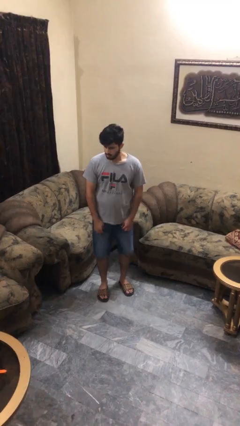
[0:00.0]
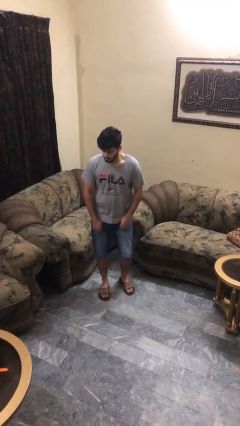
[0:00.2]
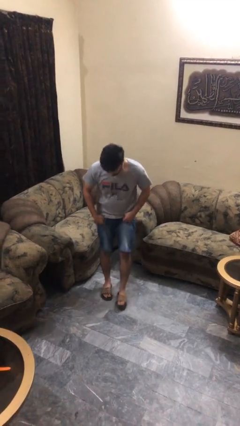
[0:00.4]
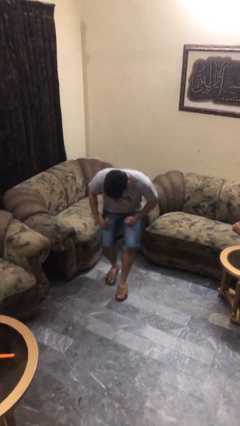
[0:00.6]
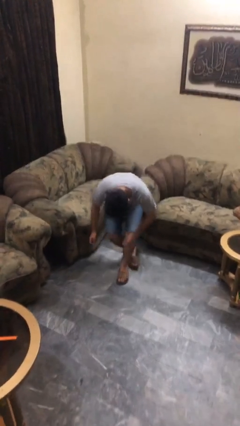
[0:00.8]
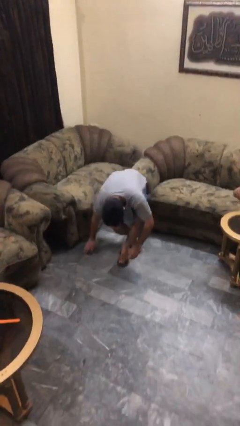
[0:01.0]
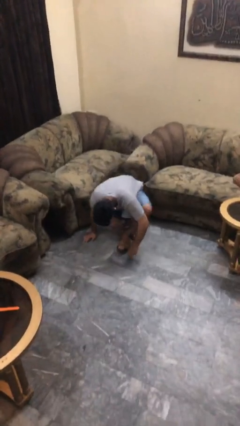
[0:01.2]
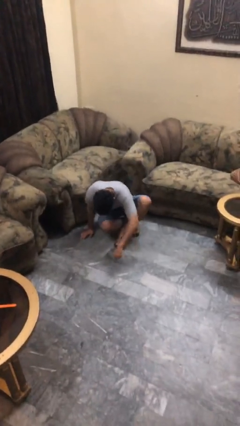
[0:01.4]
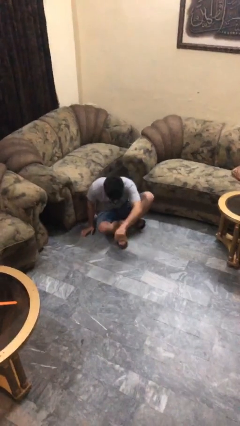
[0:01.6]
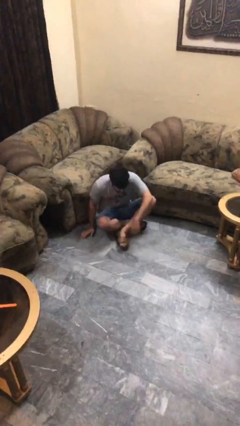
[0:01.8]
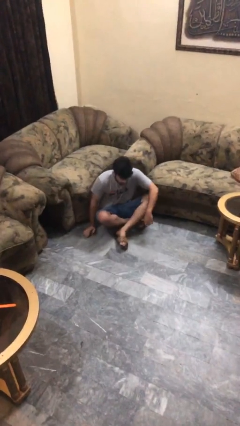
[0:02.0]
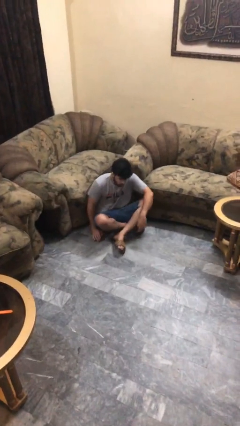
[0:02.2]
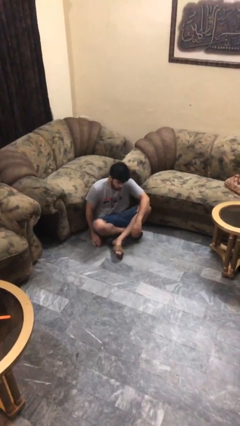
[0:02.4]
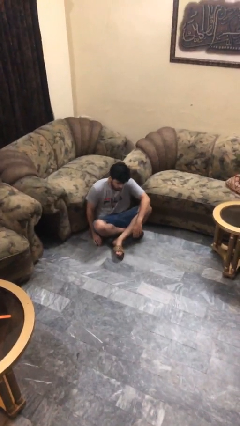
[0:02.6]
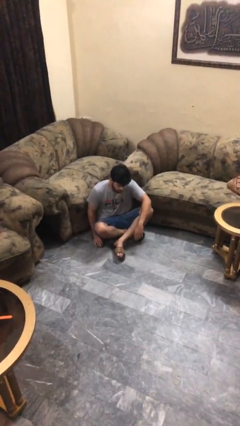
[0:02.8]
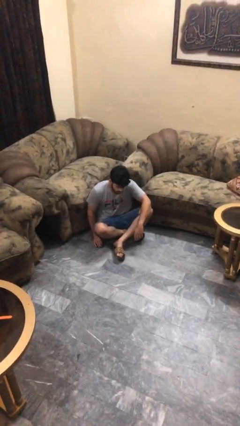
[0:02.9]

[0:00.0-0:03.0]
person sits crisscross

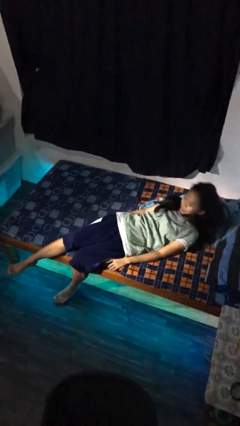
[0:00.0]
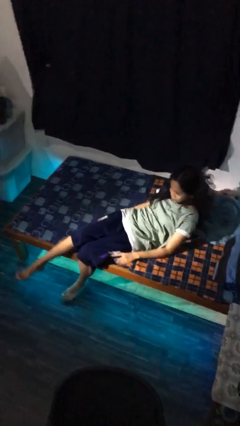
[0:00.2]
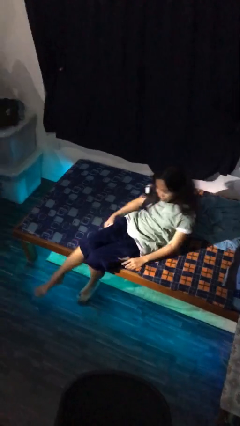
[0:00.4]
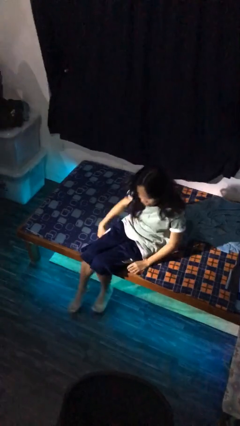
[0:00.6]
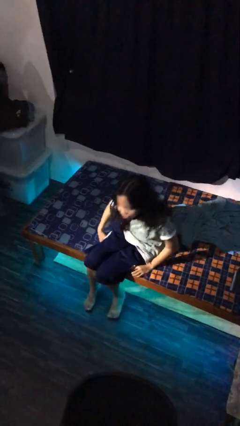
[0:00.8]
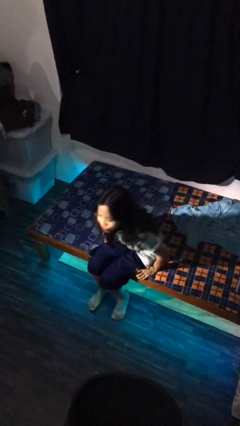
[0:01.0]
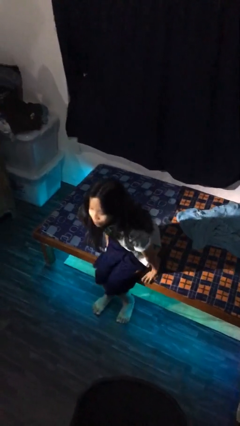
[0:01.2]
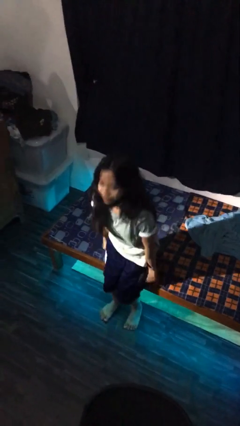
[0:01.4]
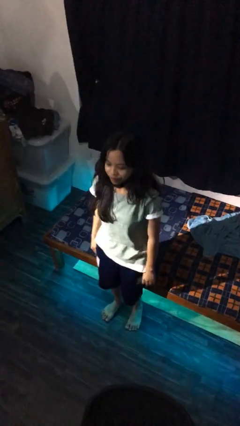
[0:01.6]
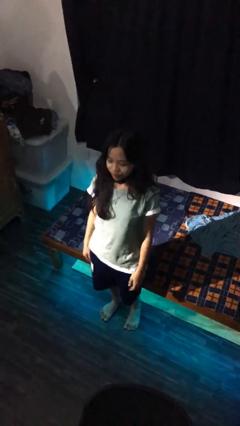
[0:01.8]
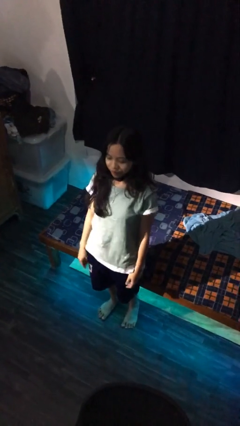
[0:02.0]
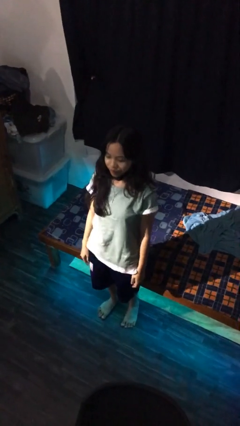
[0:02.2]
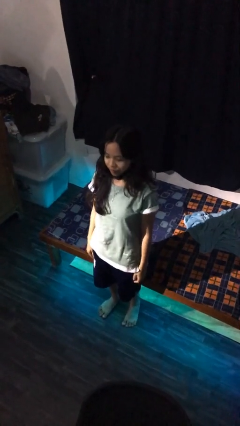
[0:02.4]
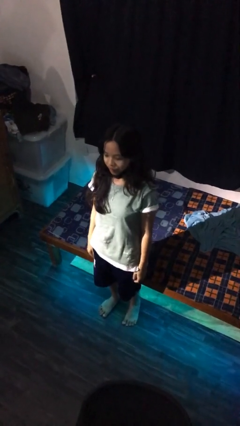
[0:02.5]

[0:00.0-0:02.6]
person stands up

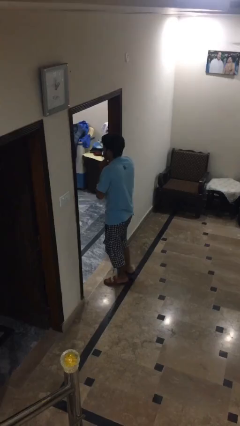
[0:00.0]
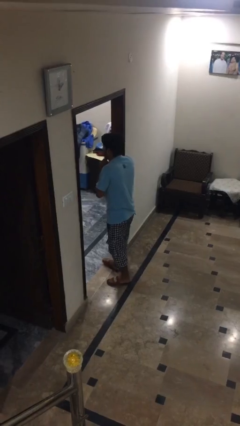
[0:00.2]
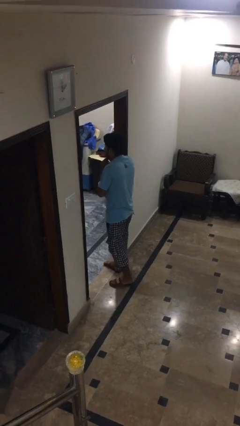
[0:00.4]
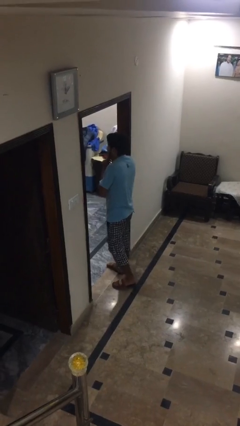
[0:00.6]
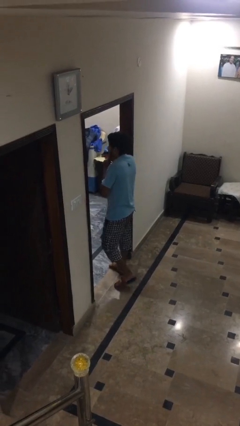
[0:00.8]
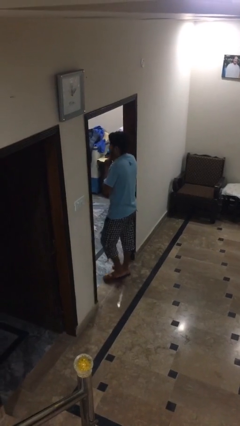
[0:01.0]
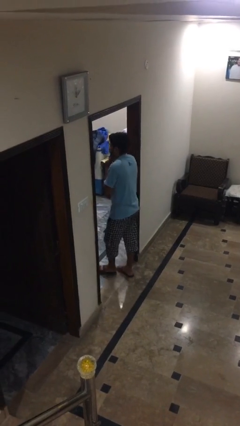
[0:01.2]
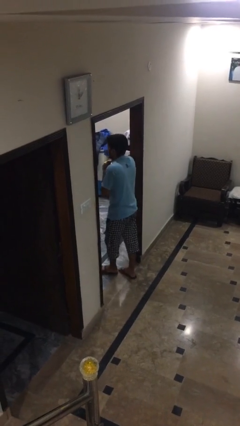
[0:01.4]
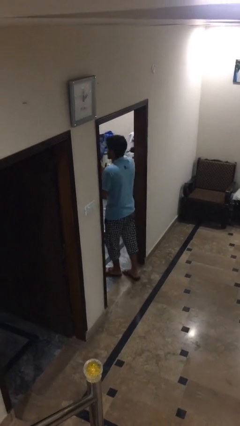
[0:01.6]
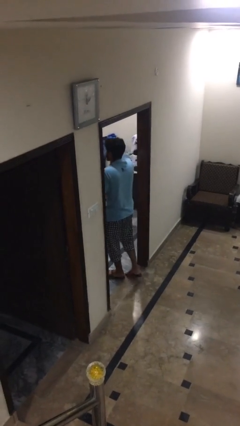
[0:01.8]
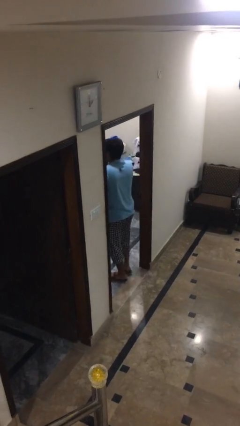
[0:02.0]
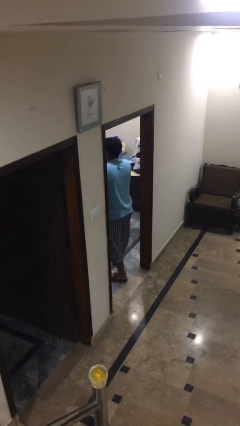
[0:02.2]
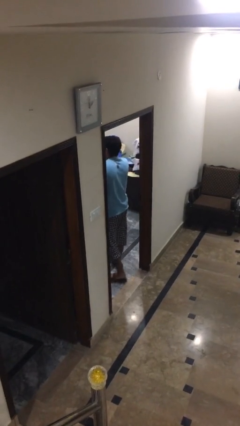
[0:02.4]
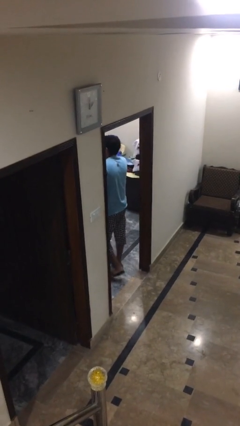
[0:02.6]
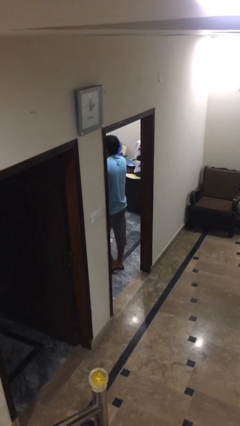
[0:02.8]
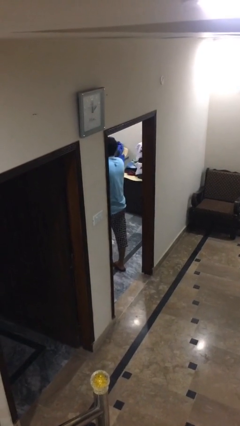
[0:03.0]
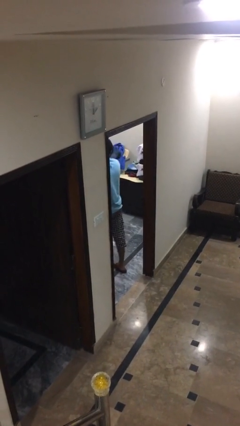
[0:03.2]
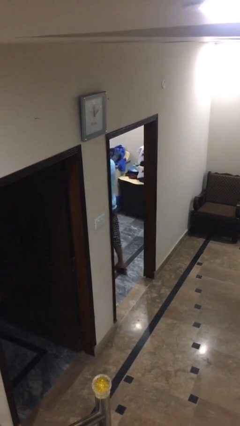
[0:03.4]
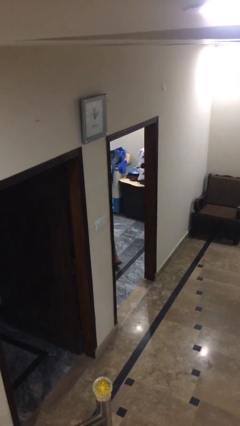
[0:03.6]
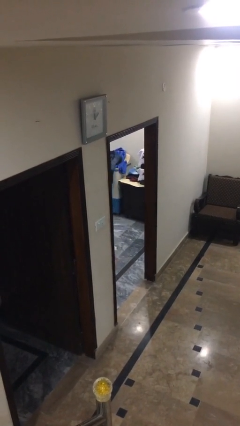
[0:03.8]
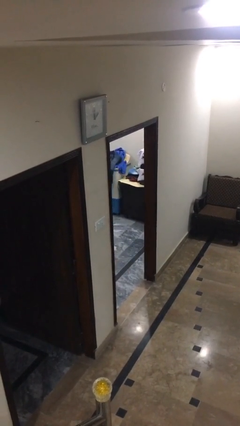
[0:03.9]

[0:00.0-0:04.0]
person exits scene through structure

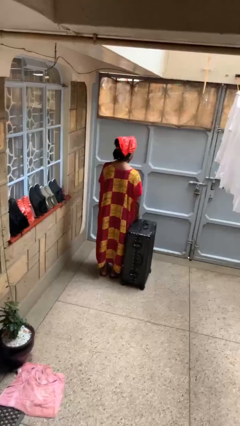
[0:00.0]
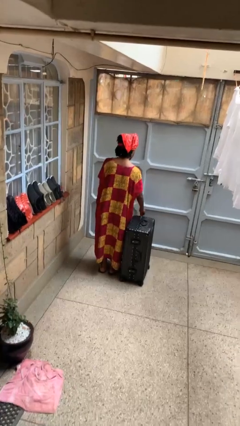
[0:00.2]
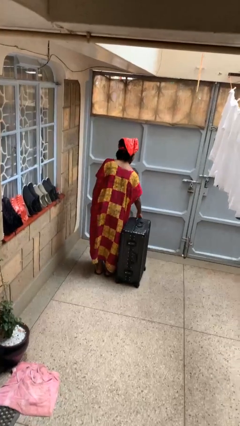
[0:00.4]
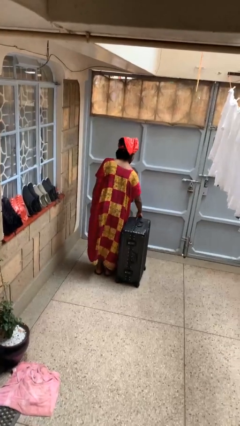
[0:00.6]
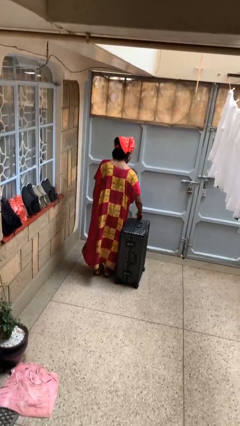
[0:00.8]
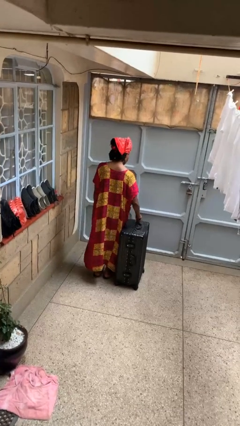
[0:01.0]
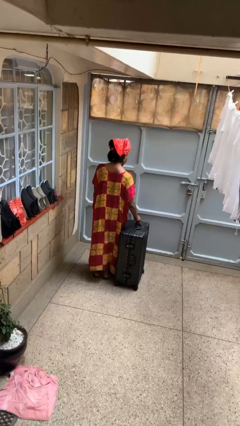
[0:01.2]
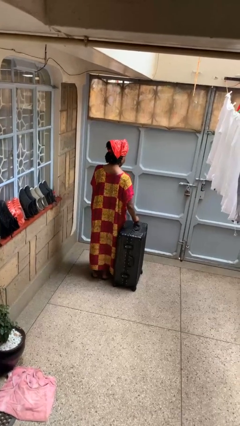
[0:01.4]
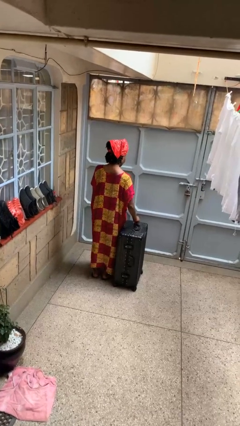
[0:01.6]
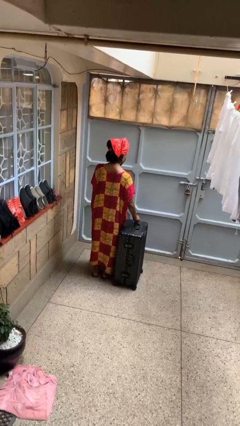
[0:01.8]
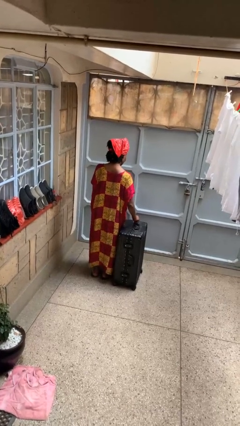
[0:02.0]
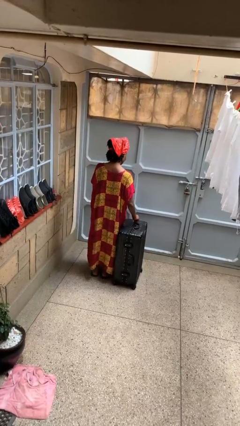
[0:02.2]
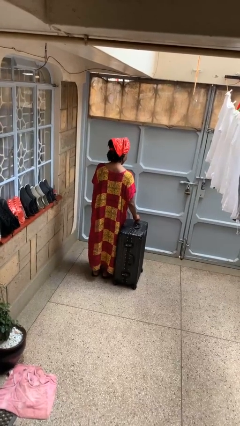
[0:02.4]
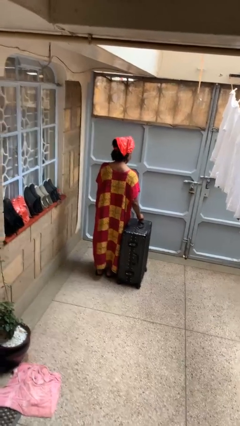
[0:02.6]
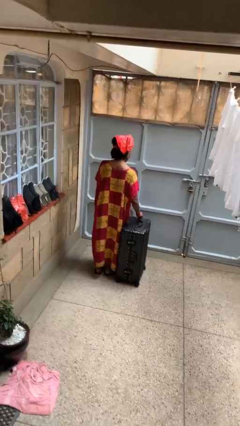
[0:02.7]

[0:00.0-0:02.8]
person opens suitcase

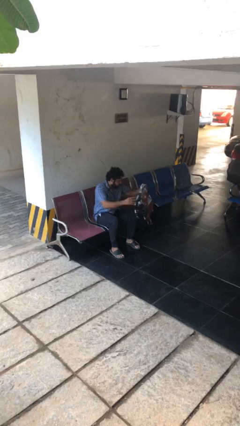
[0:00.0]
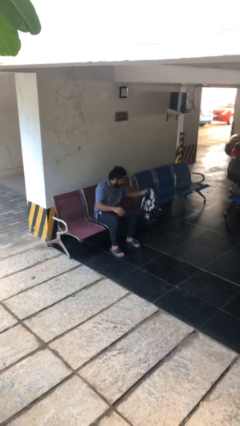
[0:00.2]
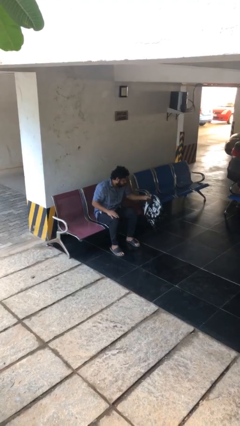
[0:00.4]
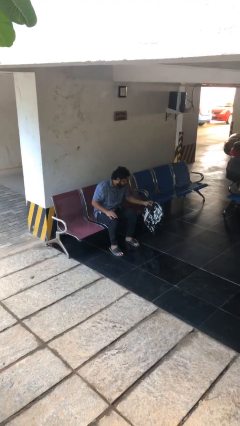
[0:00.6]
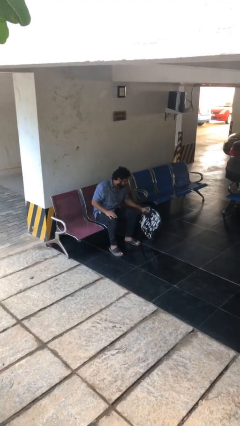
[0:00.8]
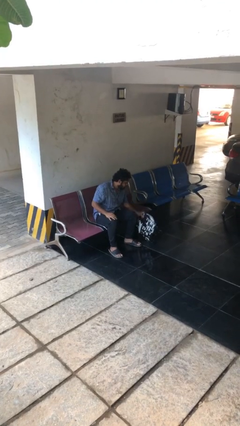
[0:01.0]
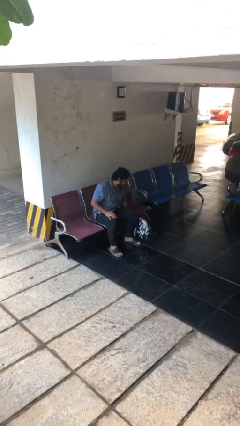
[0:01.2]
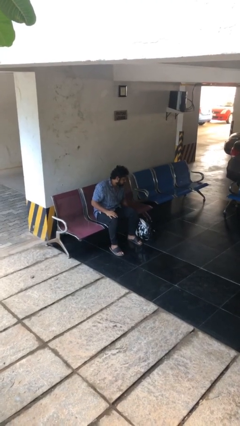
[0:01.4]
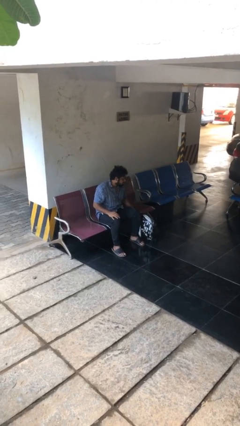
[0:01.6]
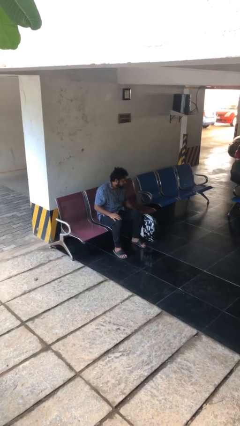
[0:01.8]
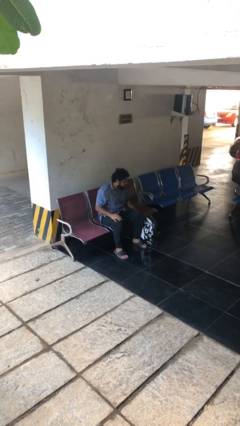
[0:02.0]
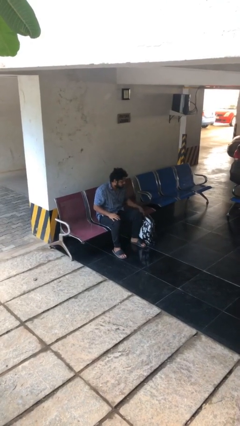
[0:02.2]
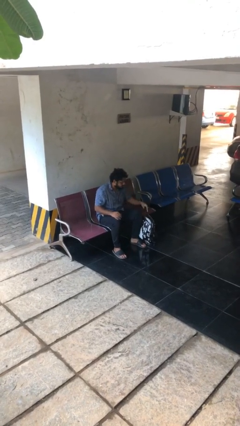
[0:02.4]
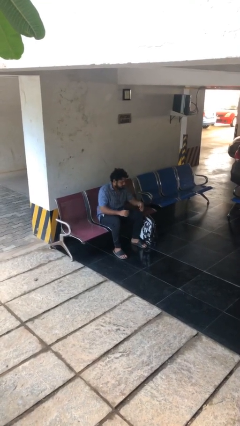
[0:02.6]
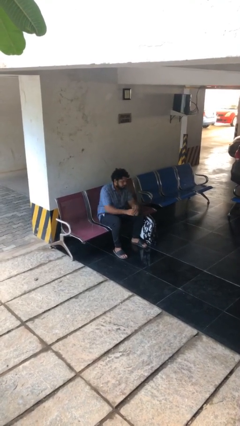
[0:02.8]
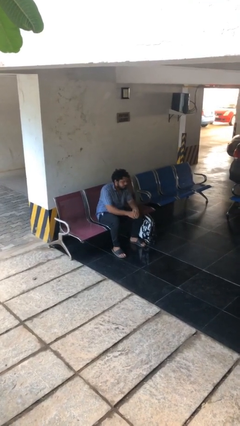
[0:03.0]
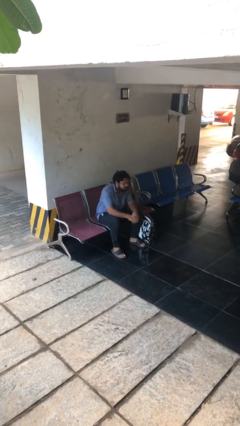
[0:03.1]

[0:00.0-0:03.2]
person puts down object on floor

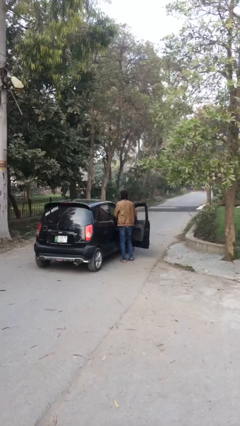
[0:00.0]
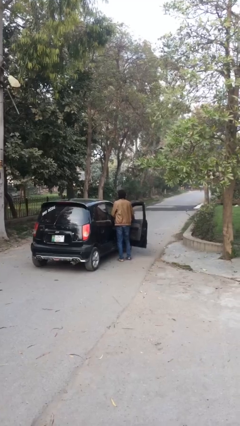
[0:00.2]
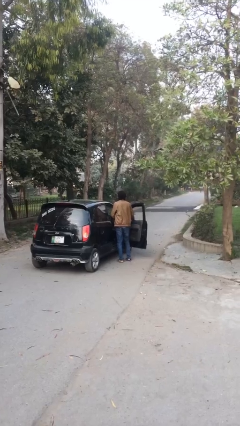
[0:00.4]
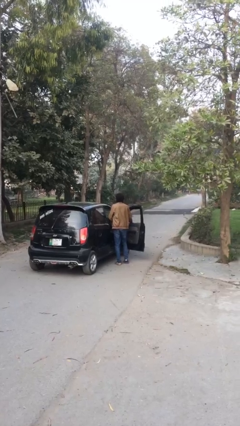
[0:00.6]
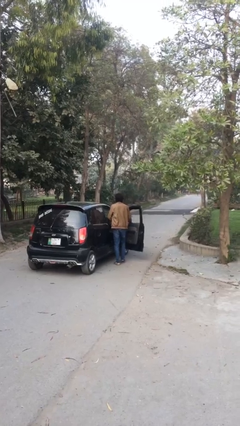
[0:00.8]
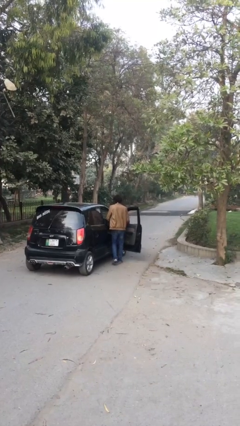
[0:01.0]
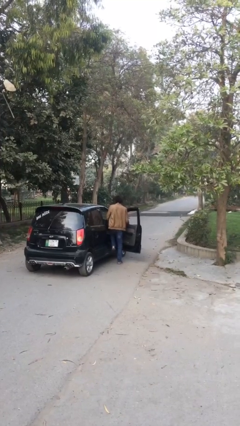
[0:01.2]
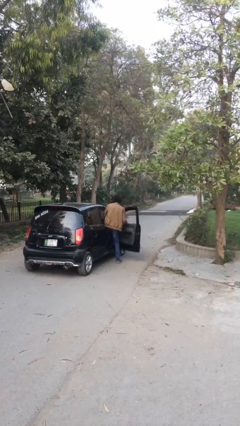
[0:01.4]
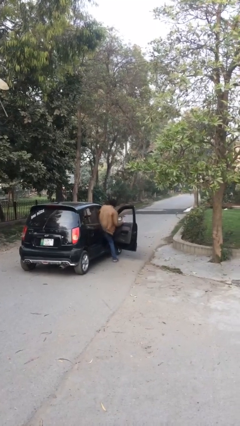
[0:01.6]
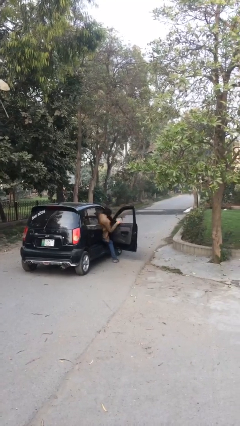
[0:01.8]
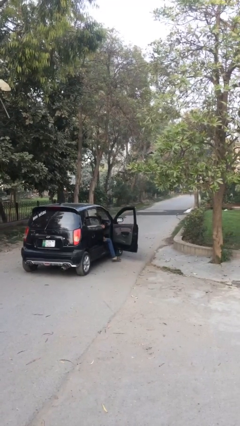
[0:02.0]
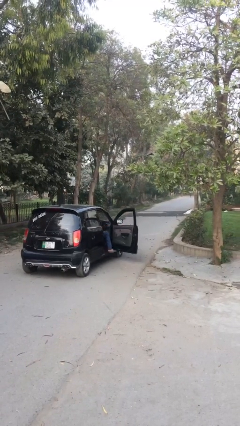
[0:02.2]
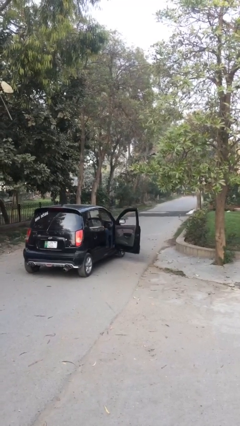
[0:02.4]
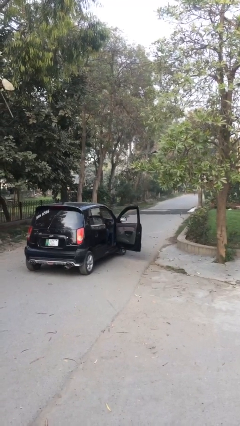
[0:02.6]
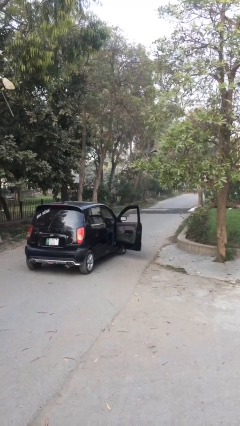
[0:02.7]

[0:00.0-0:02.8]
person enters car
